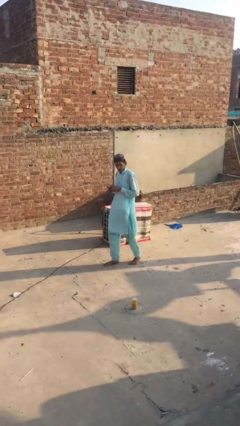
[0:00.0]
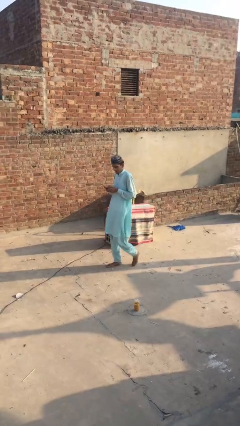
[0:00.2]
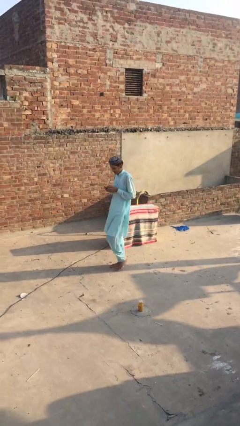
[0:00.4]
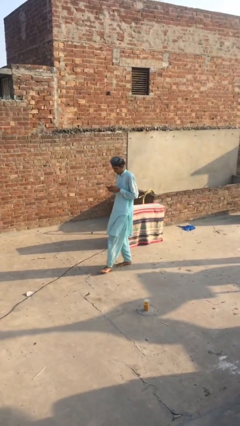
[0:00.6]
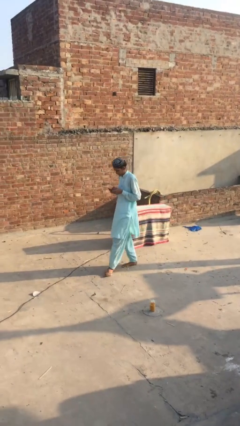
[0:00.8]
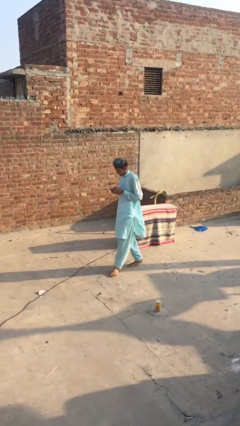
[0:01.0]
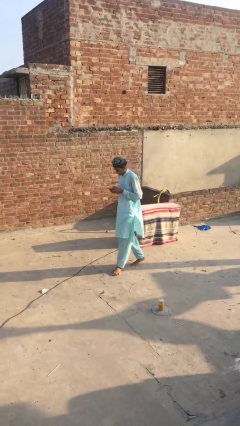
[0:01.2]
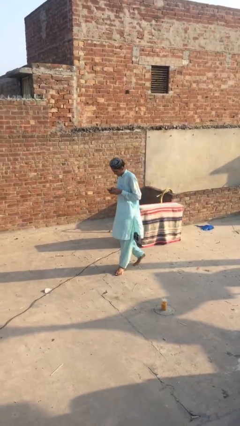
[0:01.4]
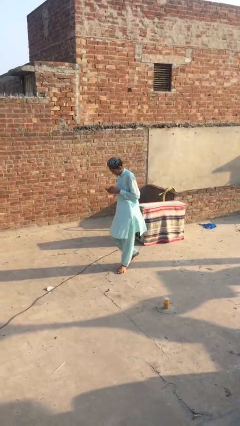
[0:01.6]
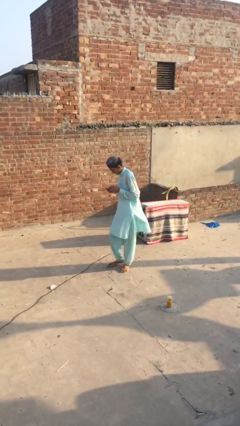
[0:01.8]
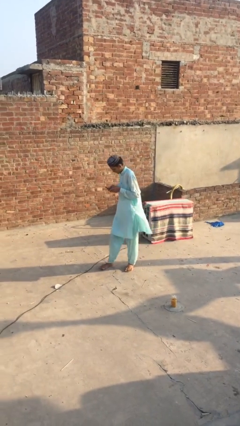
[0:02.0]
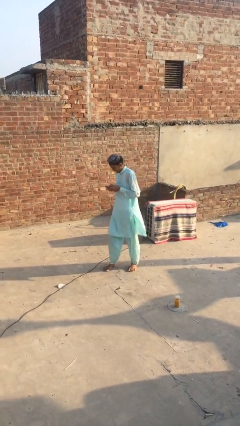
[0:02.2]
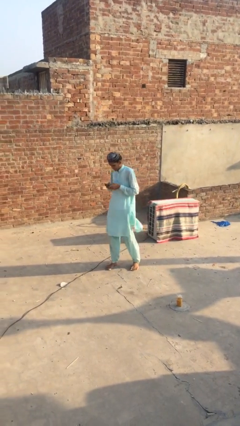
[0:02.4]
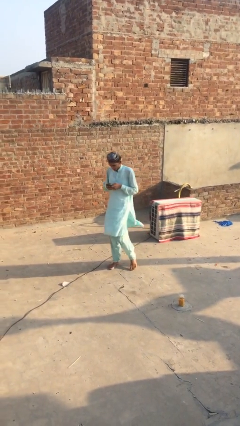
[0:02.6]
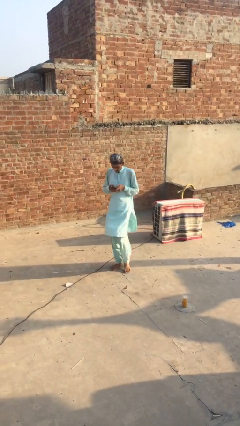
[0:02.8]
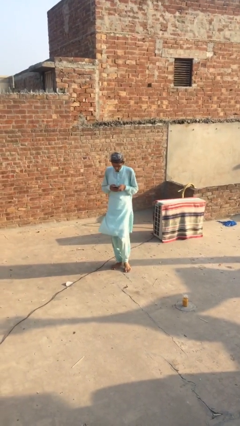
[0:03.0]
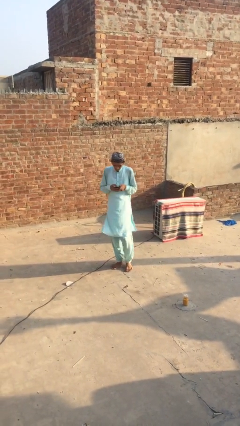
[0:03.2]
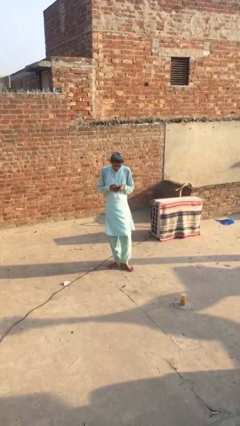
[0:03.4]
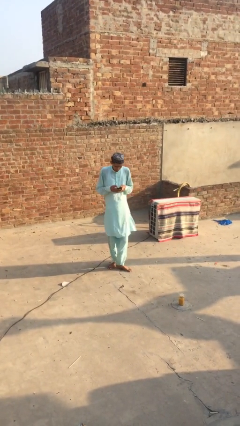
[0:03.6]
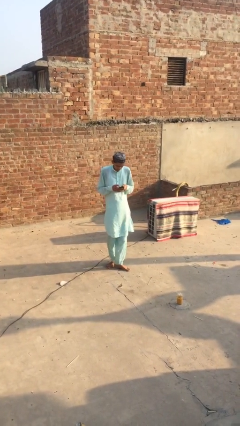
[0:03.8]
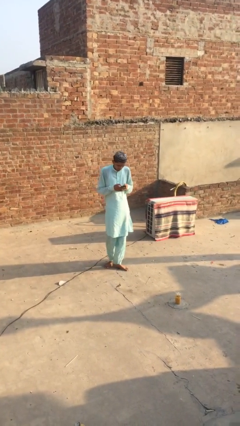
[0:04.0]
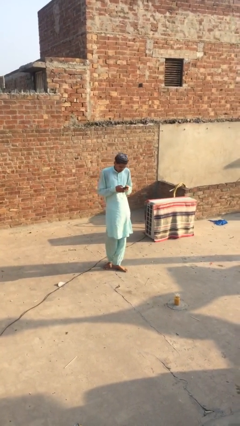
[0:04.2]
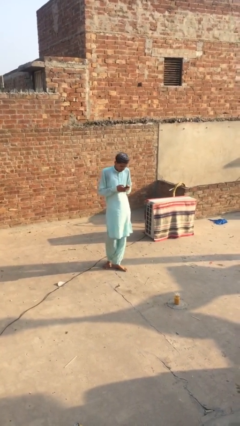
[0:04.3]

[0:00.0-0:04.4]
person texts on phone

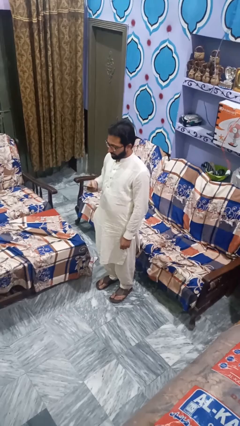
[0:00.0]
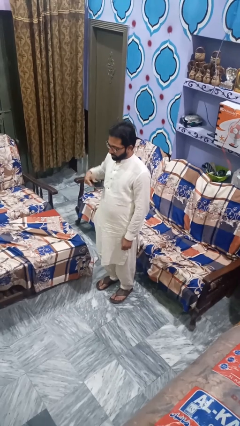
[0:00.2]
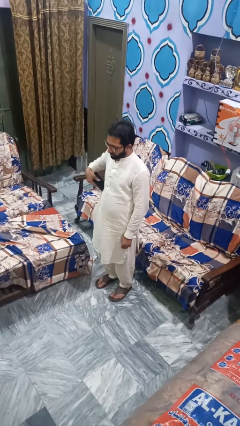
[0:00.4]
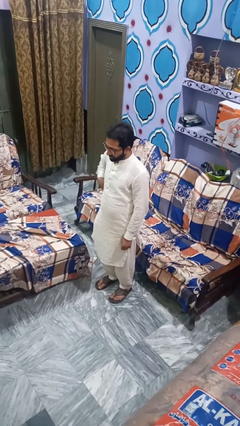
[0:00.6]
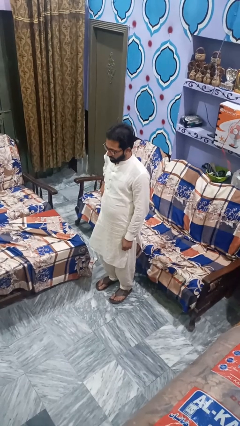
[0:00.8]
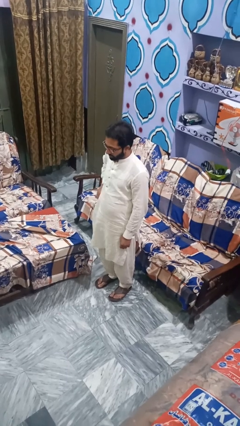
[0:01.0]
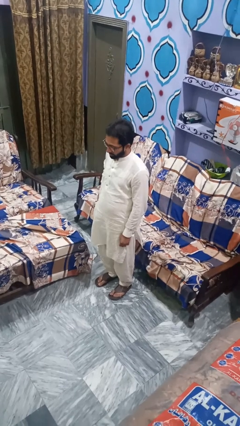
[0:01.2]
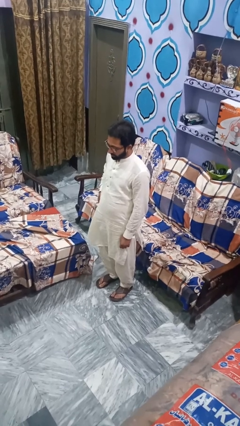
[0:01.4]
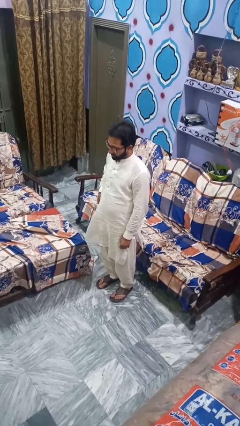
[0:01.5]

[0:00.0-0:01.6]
person puts phone into pocket

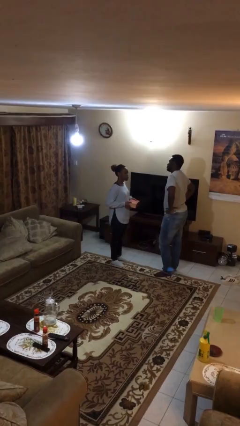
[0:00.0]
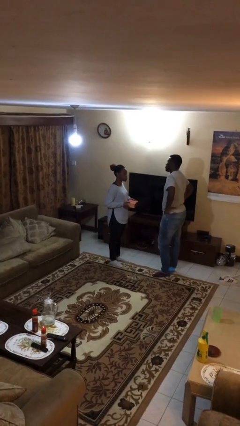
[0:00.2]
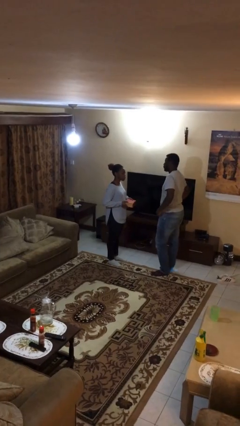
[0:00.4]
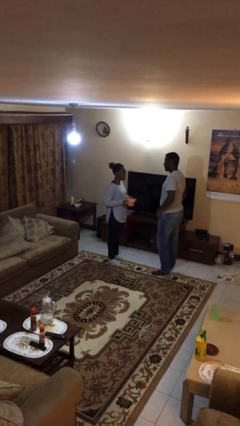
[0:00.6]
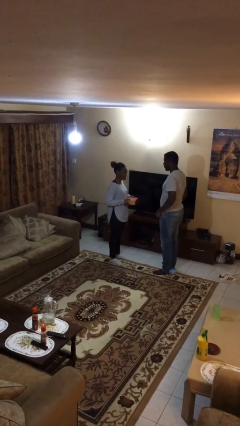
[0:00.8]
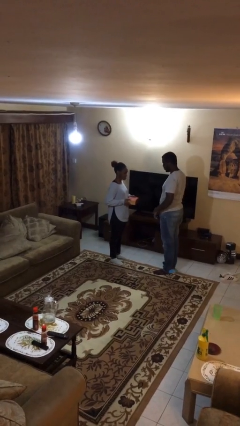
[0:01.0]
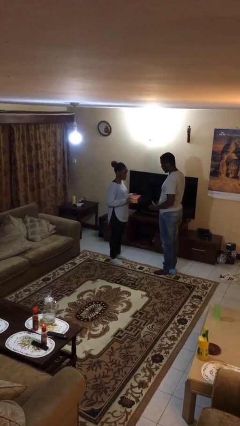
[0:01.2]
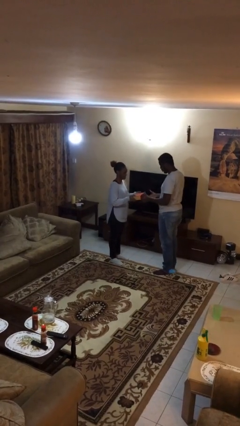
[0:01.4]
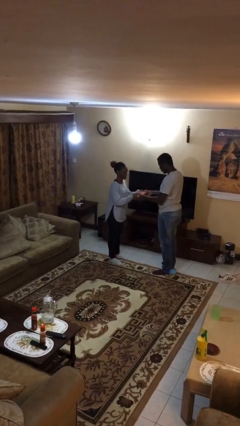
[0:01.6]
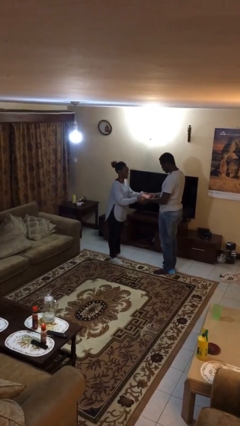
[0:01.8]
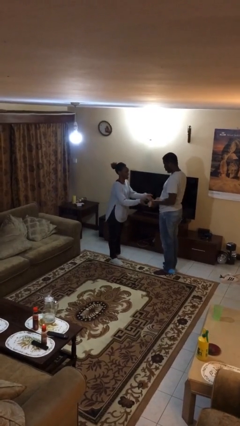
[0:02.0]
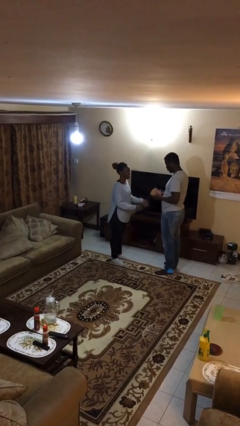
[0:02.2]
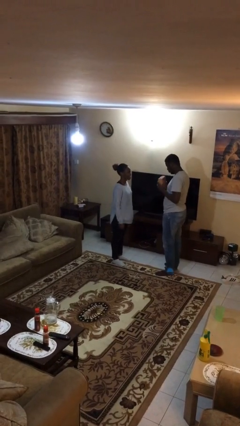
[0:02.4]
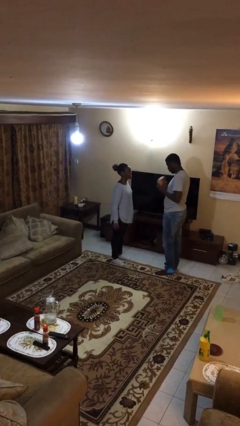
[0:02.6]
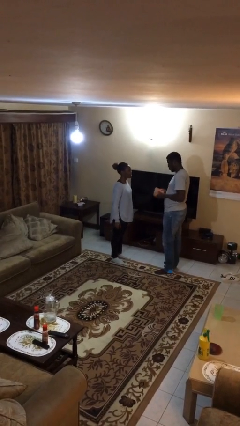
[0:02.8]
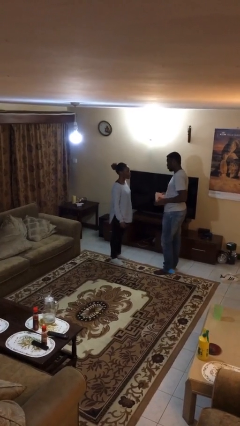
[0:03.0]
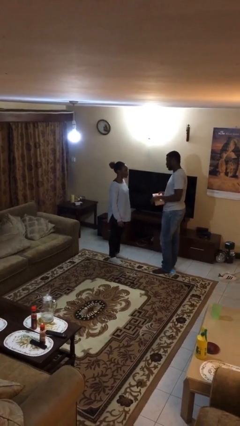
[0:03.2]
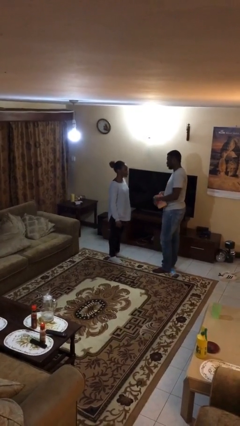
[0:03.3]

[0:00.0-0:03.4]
person transfers object to person

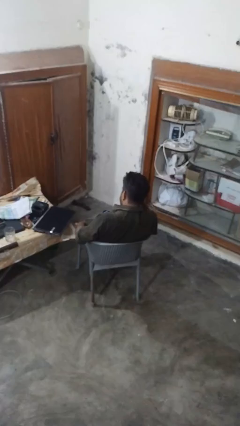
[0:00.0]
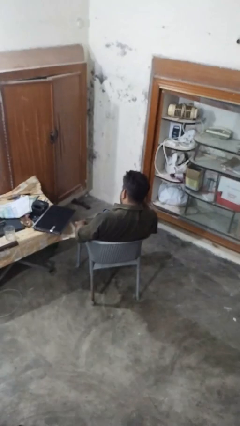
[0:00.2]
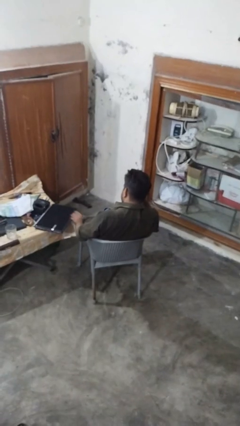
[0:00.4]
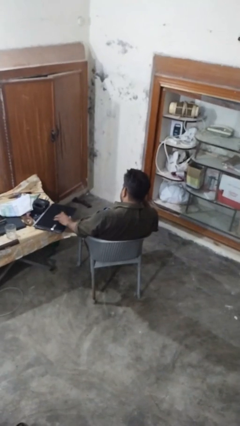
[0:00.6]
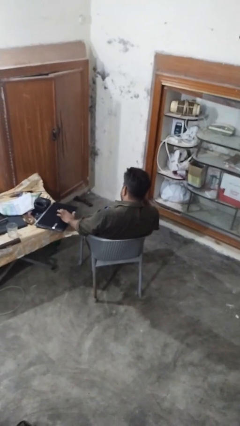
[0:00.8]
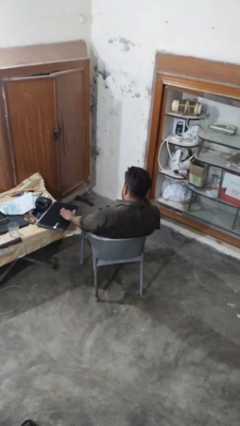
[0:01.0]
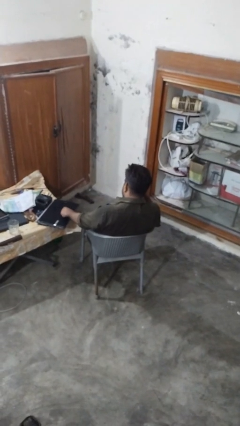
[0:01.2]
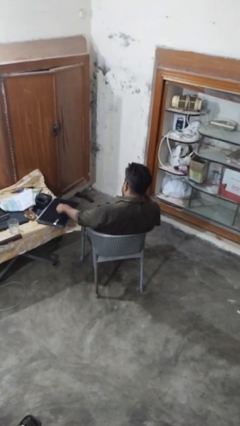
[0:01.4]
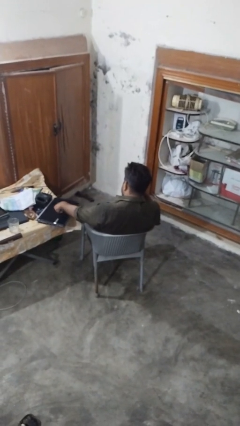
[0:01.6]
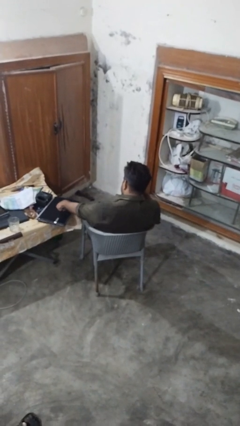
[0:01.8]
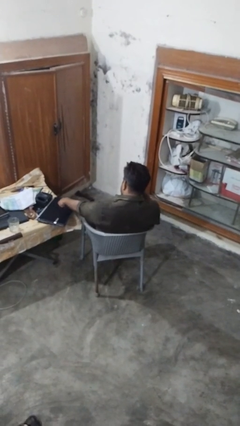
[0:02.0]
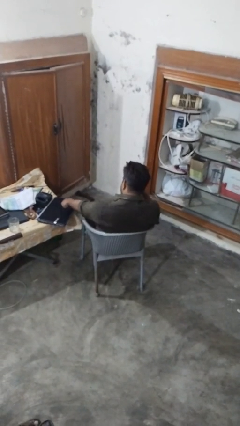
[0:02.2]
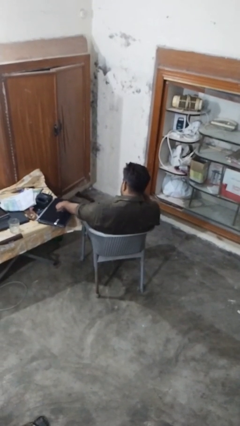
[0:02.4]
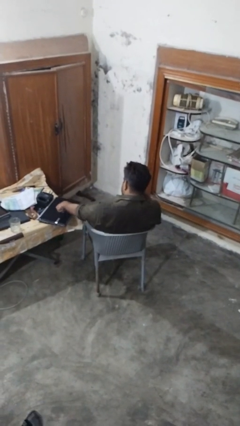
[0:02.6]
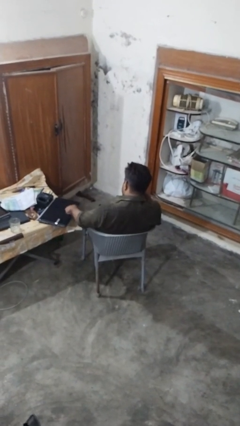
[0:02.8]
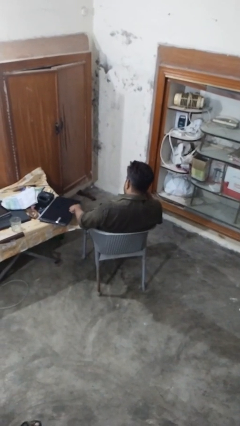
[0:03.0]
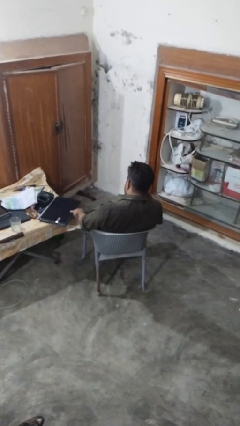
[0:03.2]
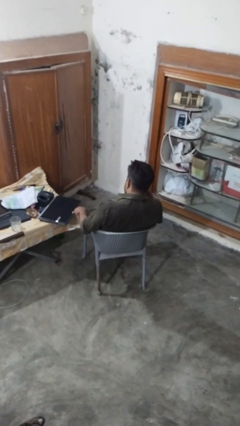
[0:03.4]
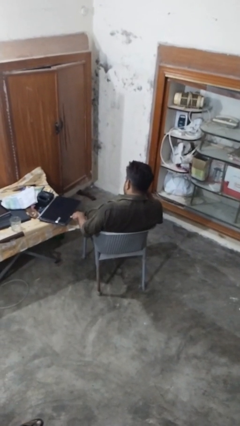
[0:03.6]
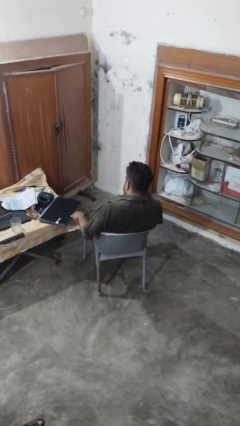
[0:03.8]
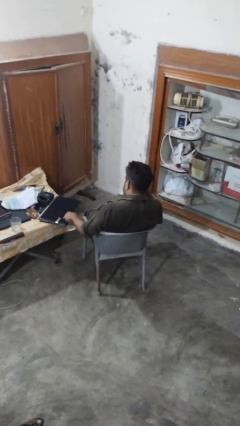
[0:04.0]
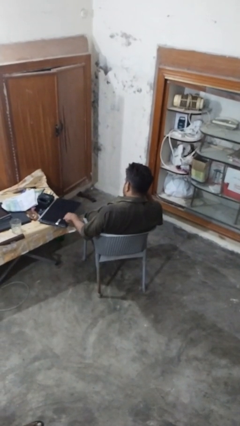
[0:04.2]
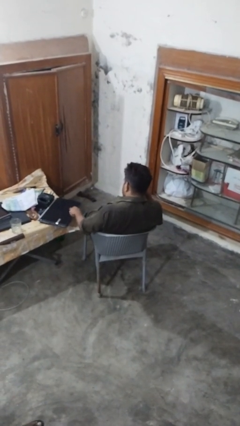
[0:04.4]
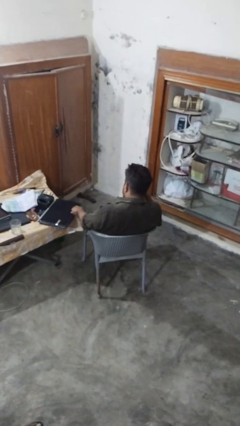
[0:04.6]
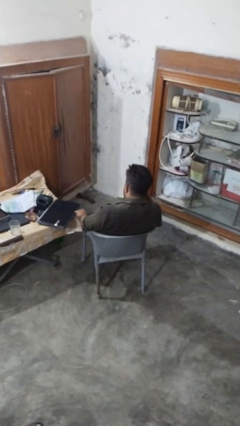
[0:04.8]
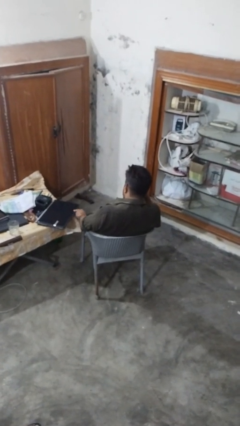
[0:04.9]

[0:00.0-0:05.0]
person taps object with finger

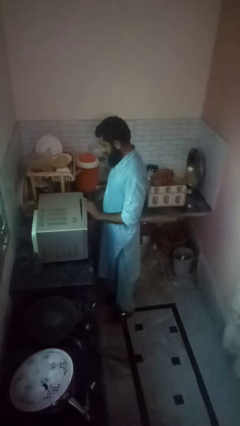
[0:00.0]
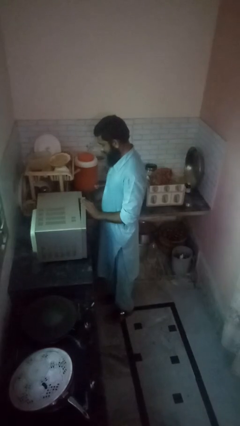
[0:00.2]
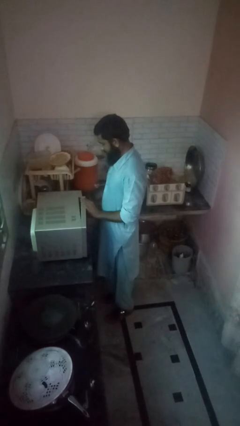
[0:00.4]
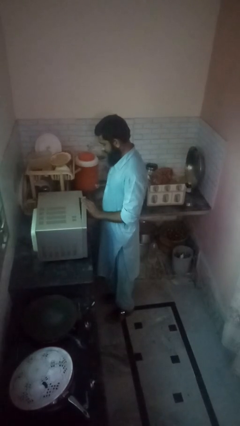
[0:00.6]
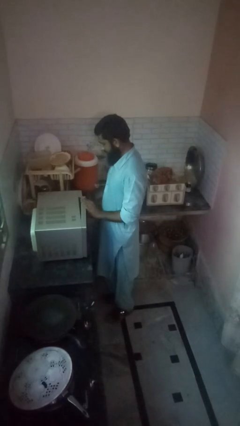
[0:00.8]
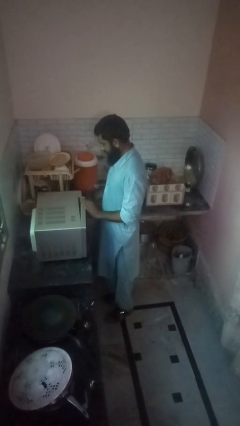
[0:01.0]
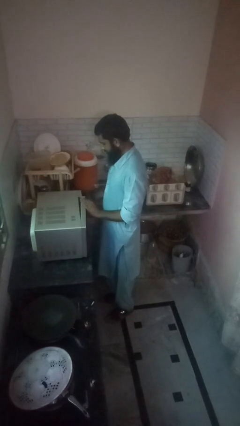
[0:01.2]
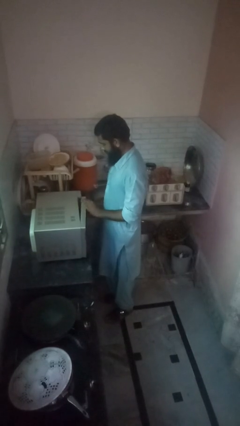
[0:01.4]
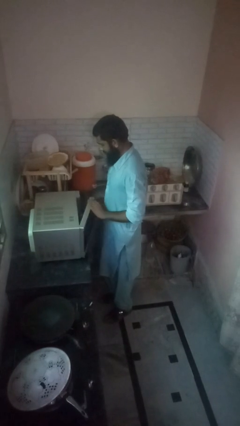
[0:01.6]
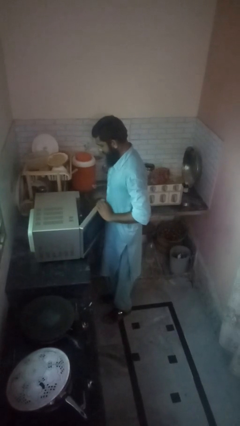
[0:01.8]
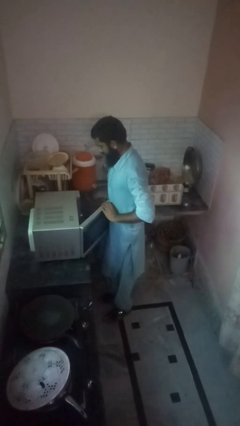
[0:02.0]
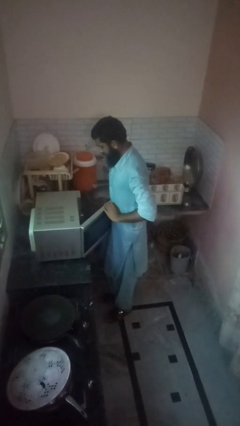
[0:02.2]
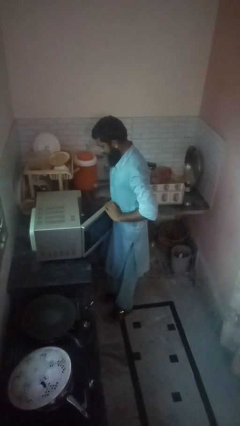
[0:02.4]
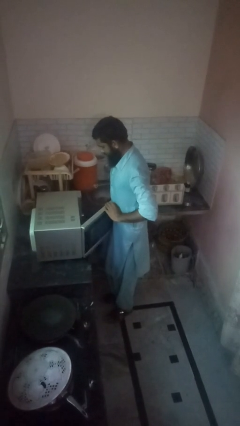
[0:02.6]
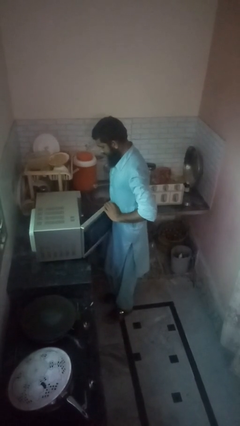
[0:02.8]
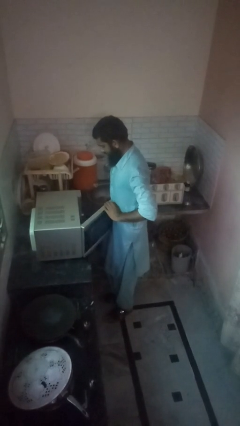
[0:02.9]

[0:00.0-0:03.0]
person opens oven door
